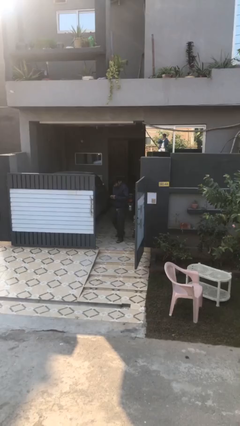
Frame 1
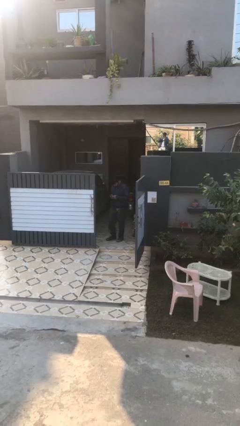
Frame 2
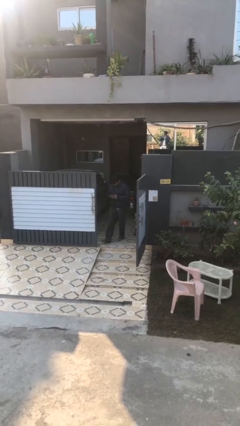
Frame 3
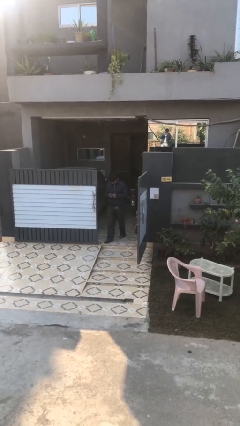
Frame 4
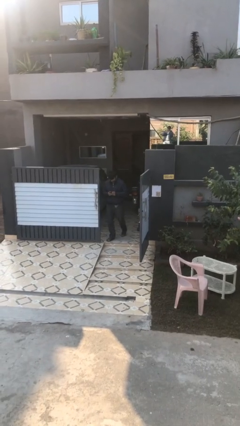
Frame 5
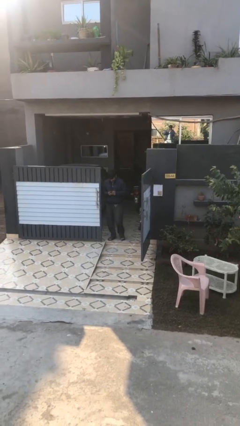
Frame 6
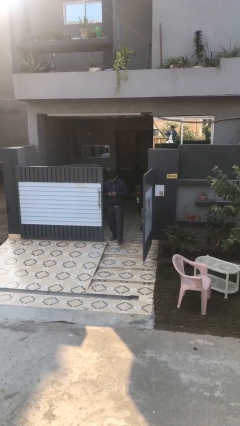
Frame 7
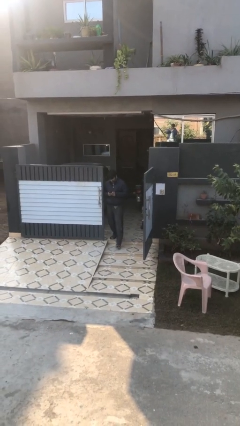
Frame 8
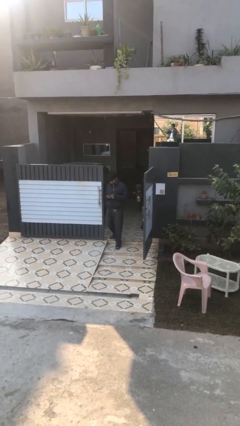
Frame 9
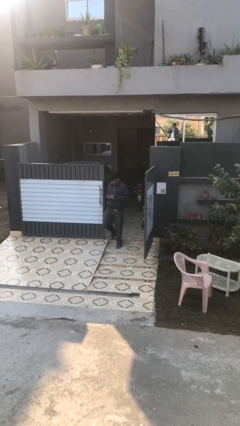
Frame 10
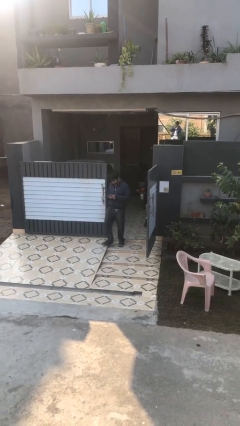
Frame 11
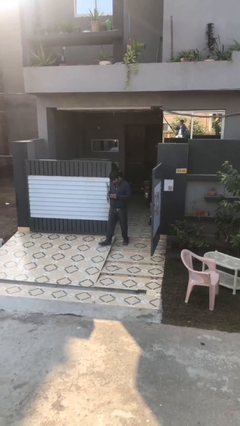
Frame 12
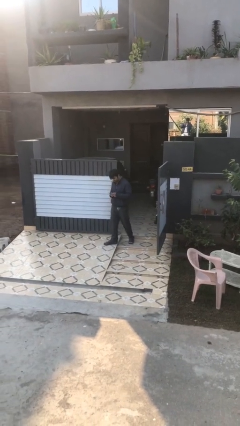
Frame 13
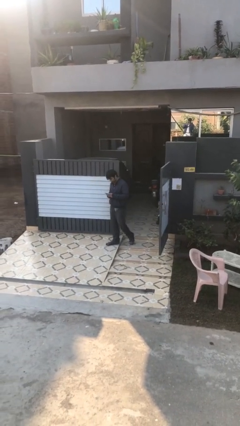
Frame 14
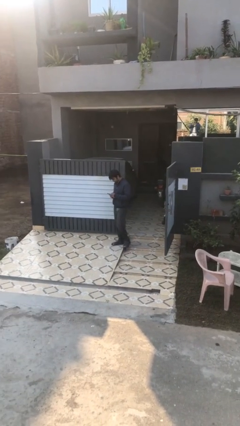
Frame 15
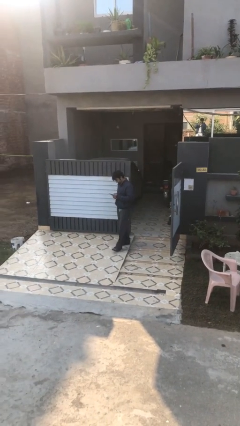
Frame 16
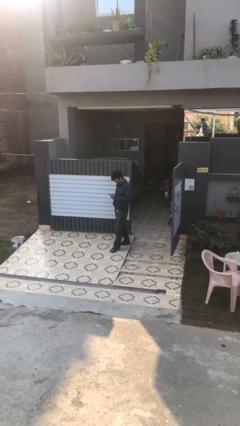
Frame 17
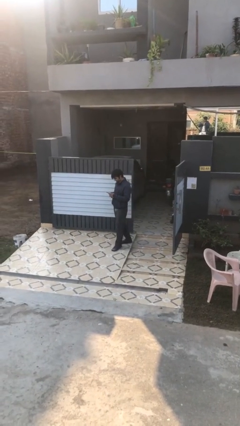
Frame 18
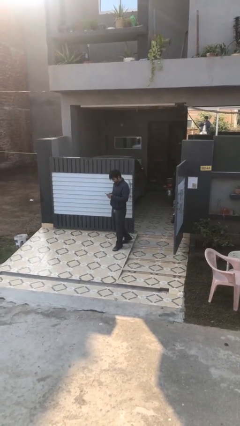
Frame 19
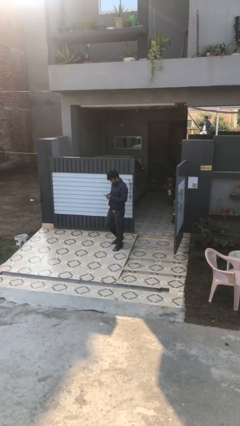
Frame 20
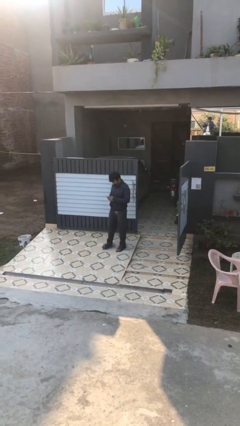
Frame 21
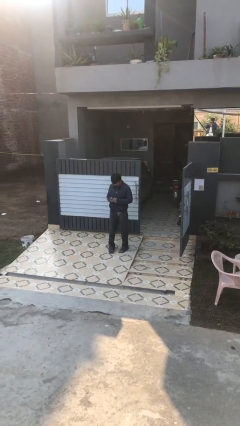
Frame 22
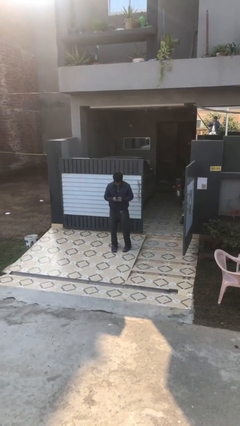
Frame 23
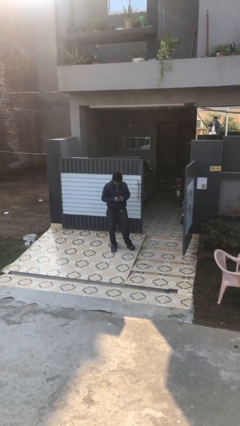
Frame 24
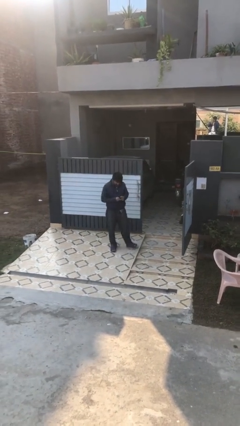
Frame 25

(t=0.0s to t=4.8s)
person enters scene through structure

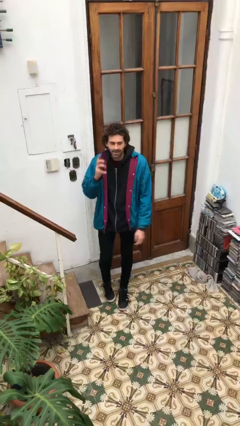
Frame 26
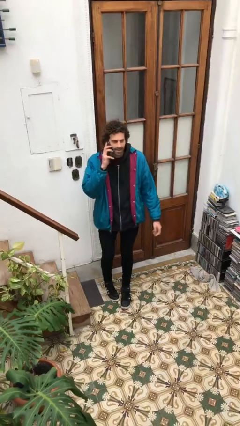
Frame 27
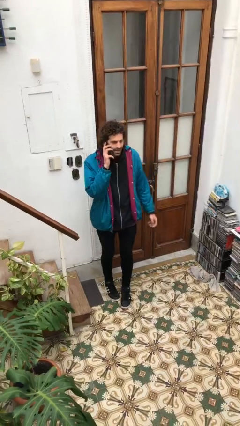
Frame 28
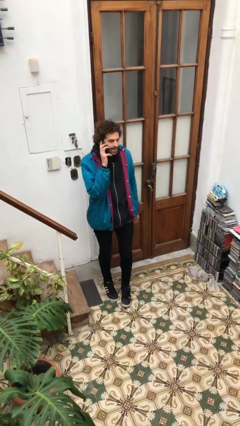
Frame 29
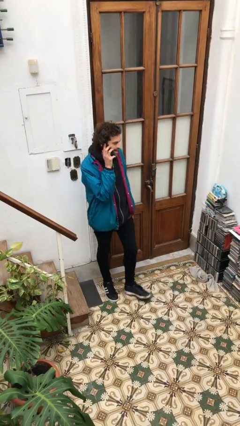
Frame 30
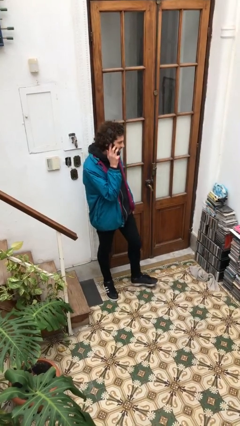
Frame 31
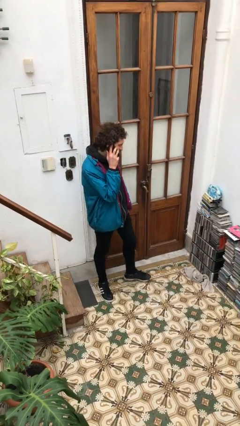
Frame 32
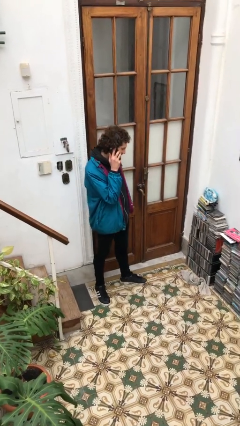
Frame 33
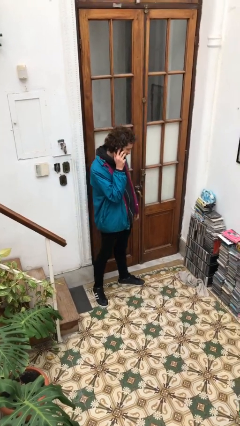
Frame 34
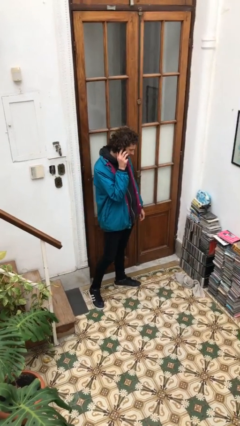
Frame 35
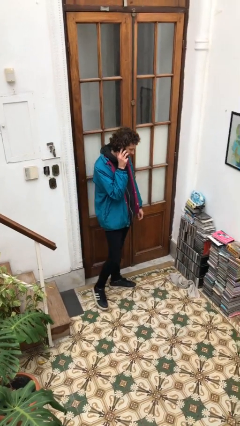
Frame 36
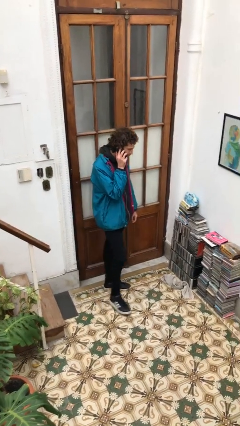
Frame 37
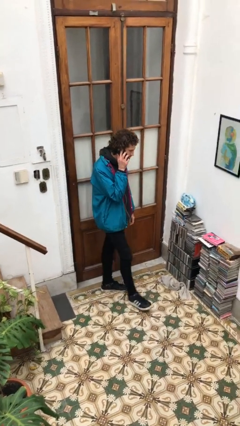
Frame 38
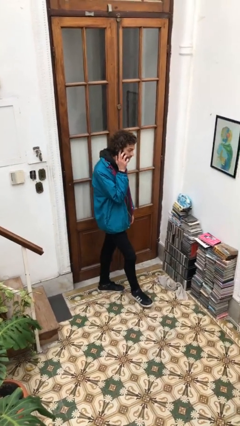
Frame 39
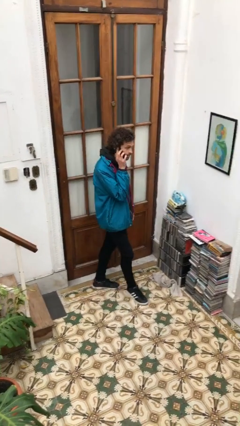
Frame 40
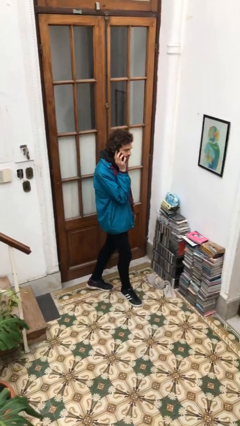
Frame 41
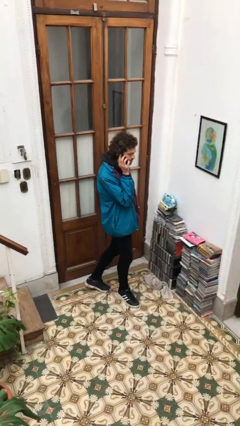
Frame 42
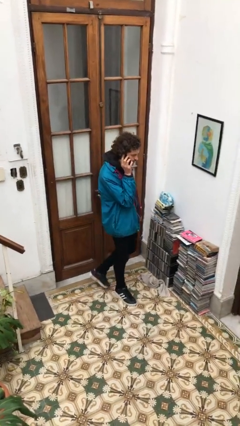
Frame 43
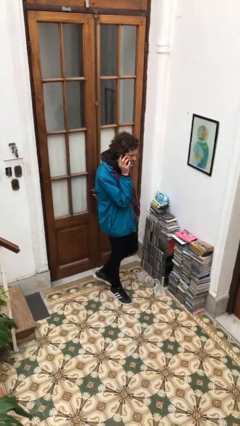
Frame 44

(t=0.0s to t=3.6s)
person talks on phone

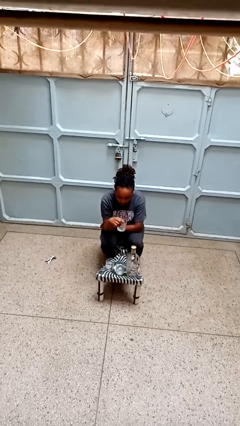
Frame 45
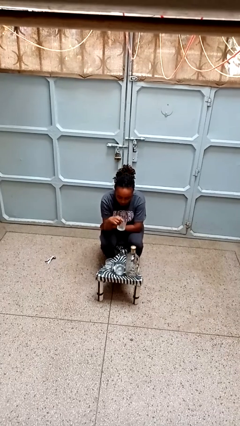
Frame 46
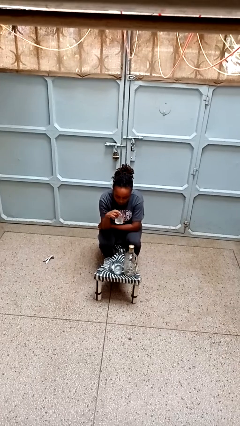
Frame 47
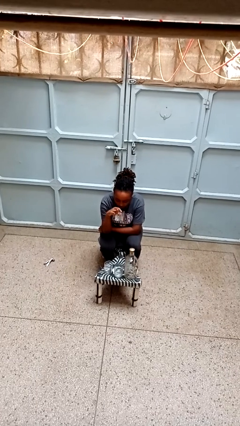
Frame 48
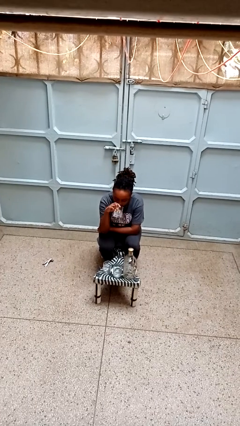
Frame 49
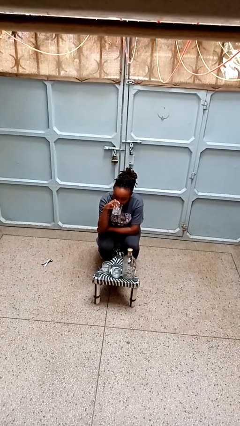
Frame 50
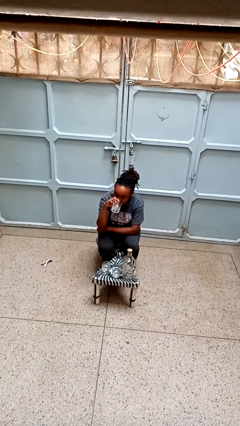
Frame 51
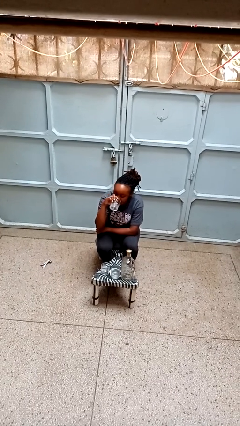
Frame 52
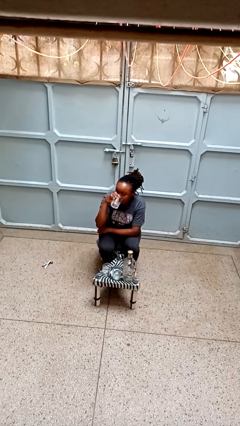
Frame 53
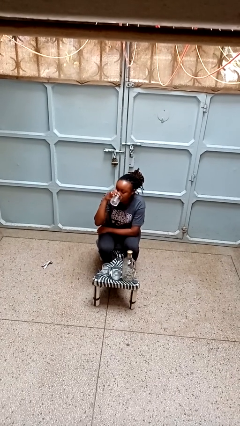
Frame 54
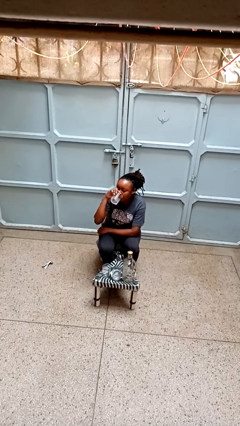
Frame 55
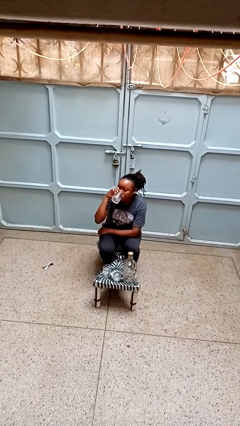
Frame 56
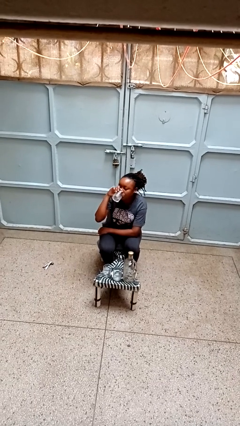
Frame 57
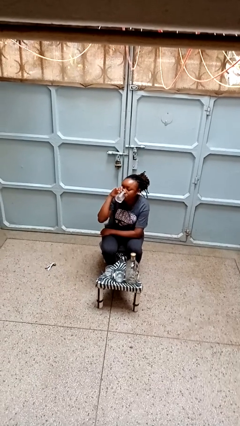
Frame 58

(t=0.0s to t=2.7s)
person drinks from shotglass

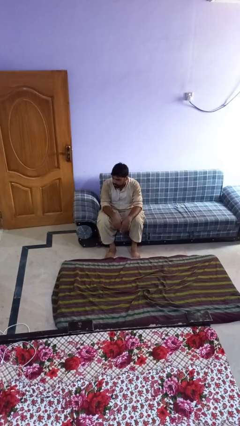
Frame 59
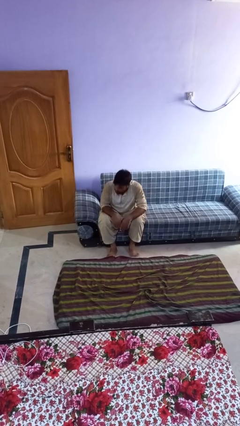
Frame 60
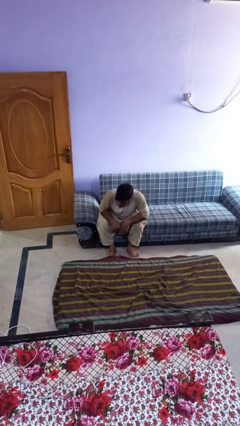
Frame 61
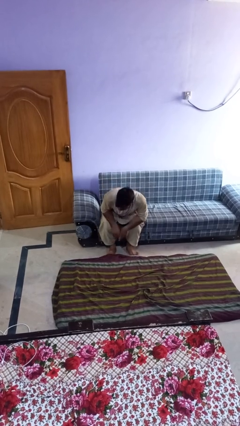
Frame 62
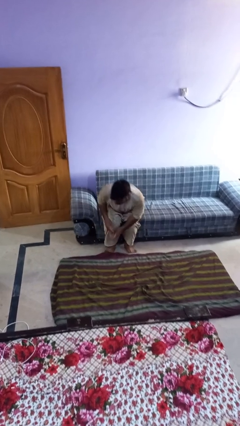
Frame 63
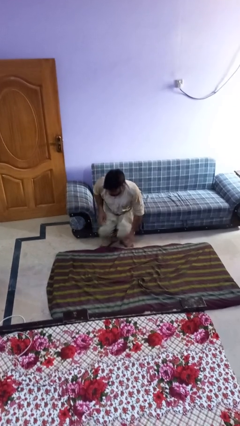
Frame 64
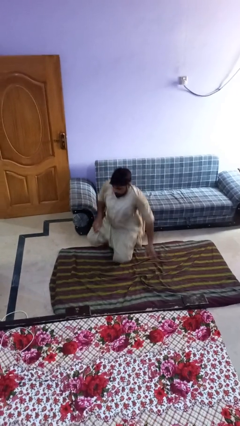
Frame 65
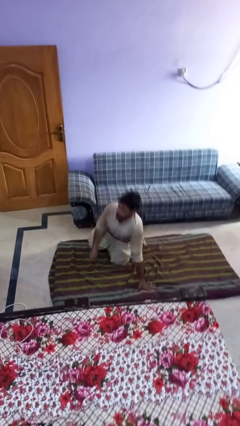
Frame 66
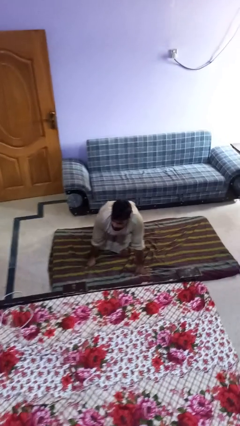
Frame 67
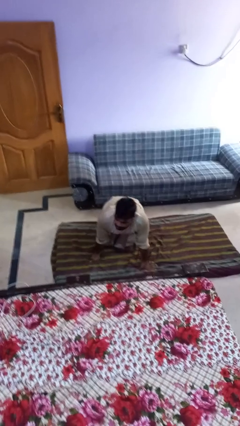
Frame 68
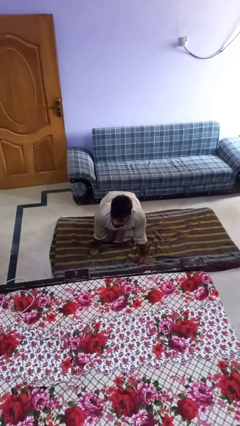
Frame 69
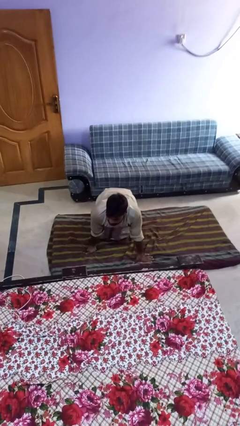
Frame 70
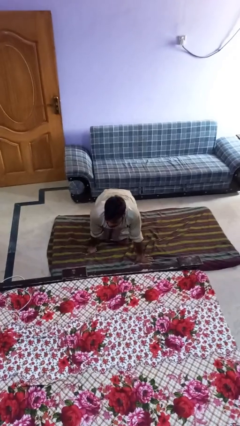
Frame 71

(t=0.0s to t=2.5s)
person falls from chair

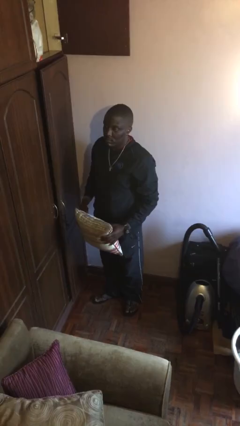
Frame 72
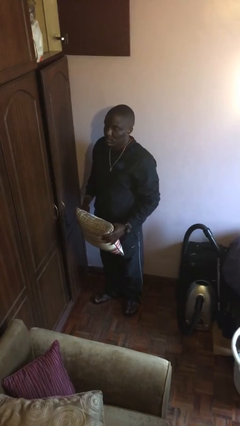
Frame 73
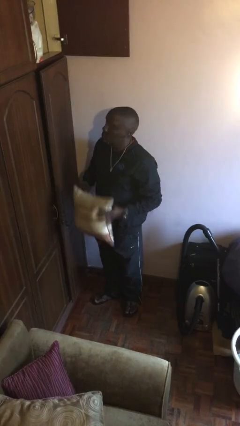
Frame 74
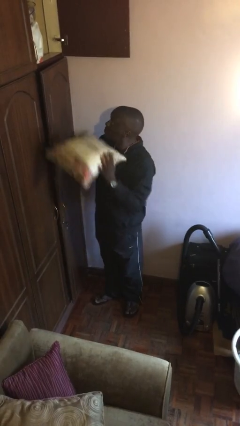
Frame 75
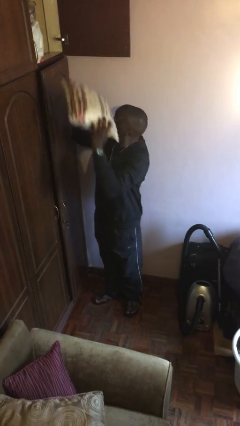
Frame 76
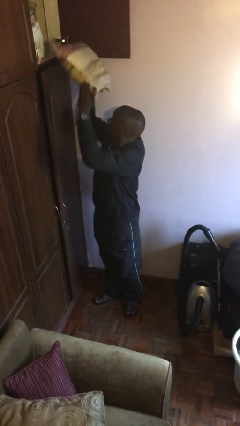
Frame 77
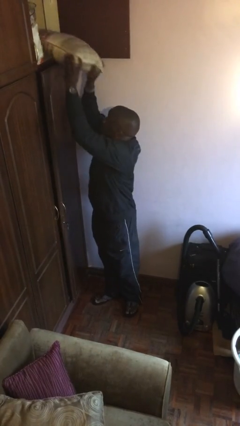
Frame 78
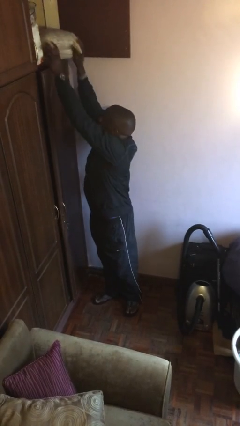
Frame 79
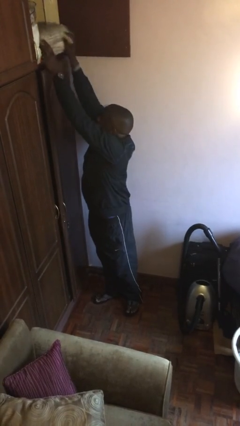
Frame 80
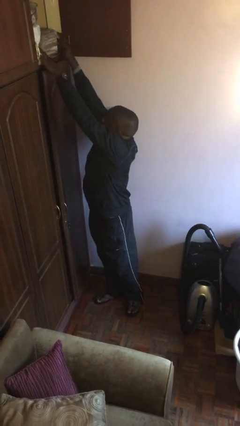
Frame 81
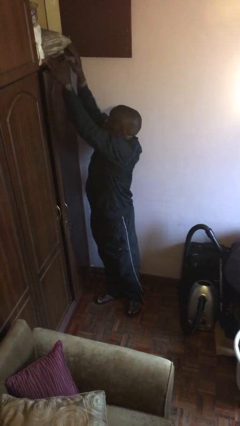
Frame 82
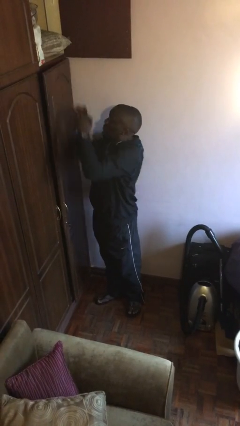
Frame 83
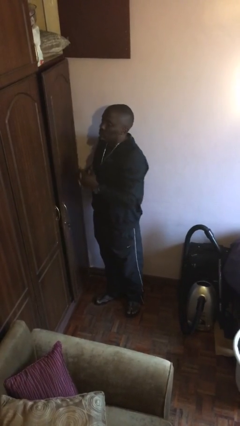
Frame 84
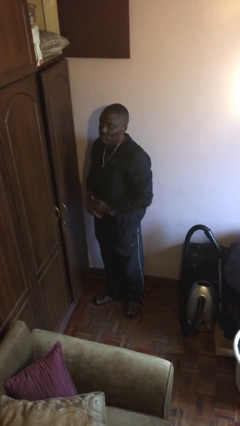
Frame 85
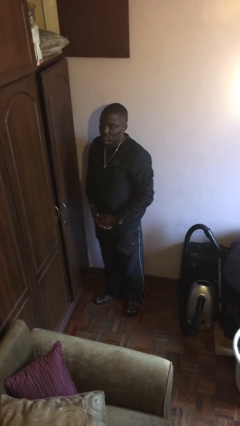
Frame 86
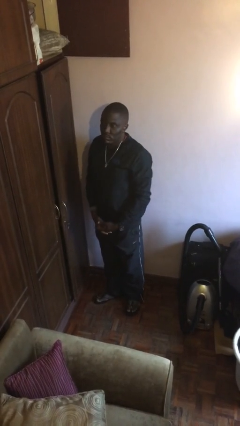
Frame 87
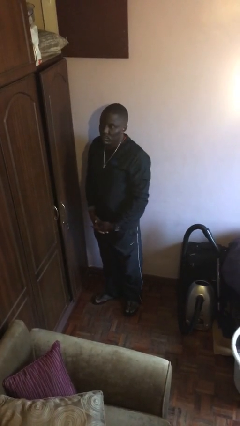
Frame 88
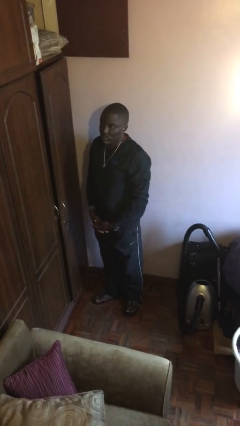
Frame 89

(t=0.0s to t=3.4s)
person puts down object on shelf

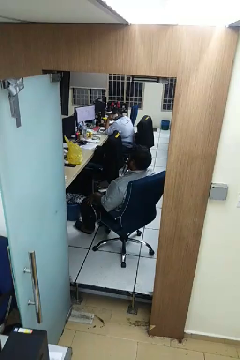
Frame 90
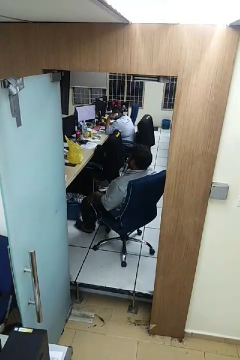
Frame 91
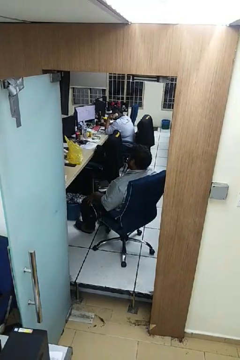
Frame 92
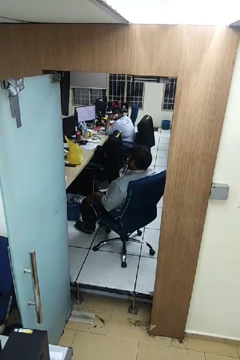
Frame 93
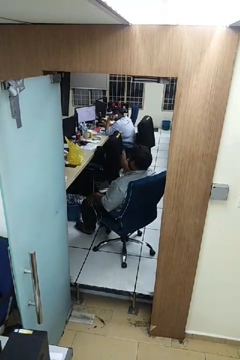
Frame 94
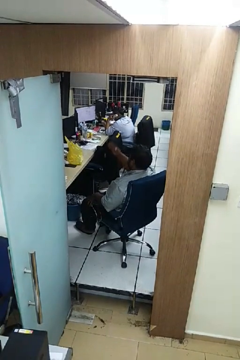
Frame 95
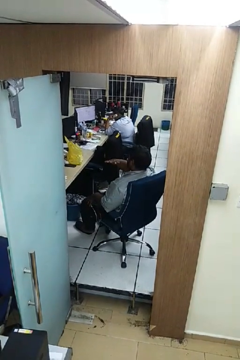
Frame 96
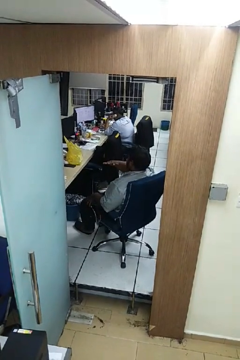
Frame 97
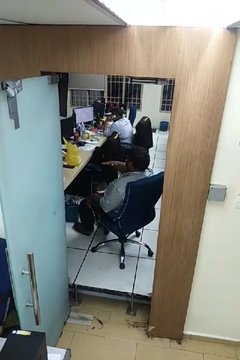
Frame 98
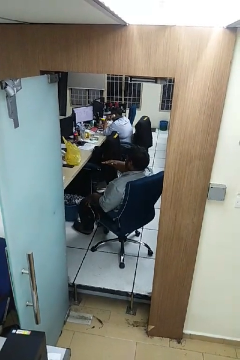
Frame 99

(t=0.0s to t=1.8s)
person gestures swipe left
